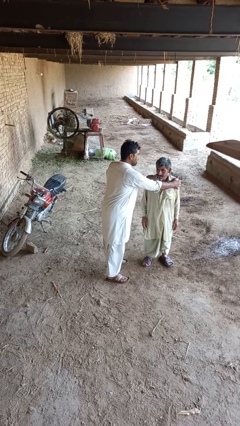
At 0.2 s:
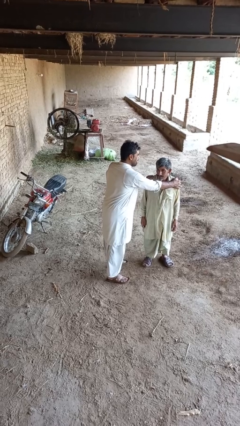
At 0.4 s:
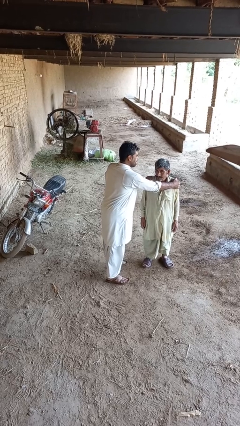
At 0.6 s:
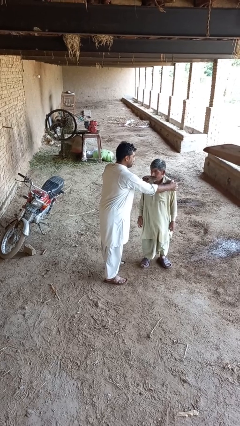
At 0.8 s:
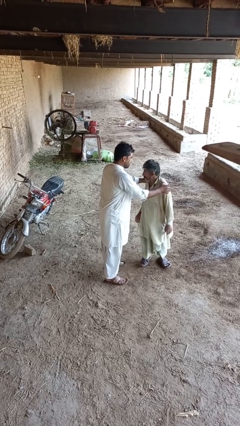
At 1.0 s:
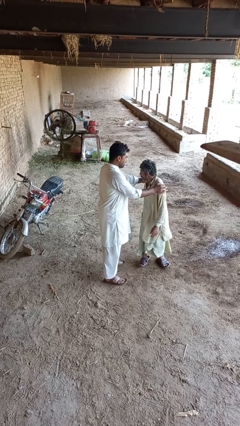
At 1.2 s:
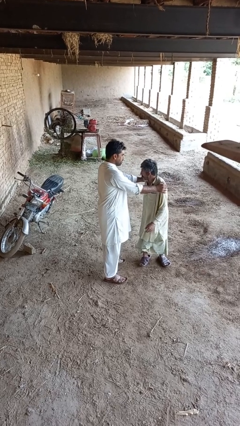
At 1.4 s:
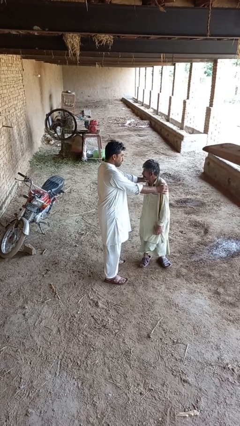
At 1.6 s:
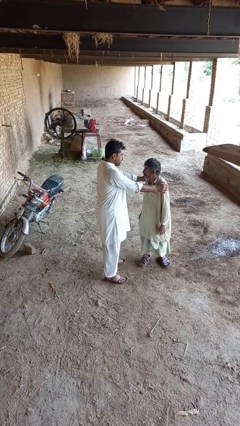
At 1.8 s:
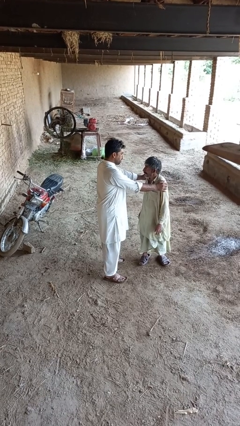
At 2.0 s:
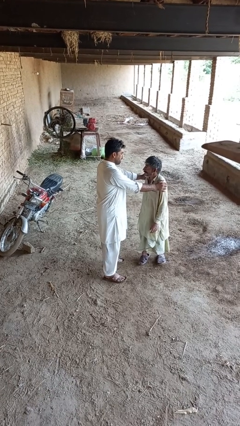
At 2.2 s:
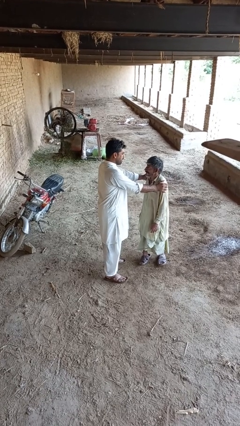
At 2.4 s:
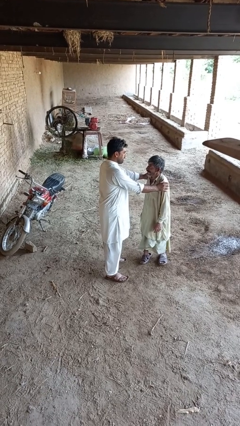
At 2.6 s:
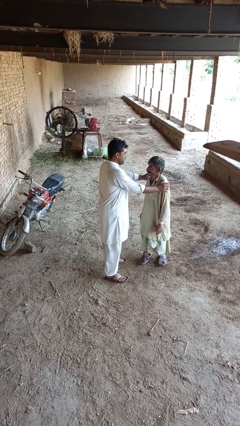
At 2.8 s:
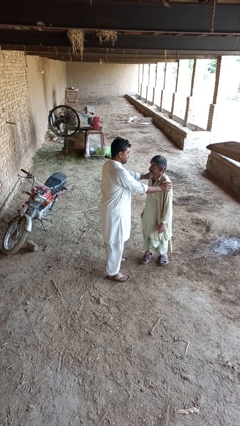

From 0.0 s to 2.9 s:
person spins person around

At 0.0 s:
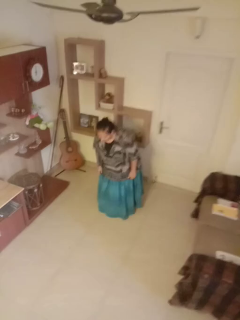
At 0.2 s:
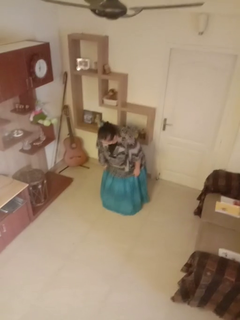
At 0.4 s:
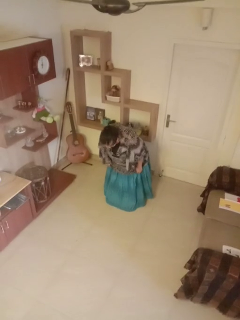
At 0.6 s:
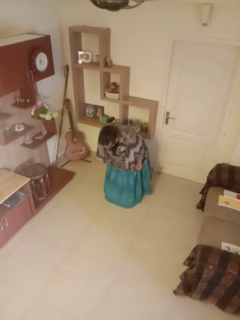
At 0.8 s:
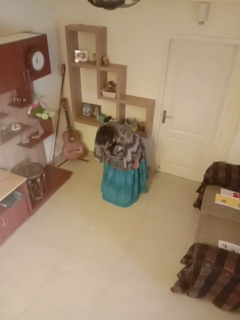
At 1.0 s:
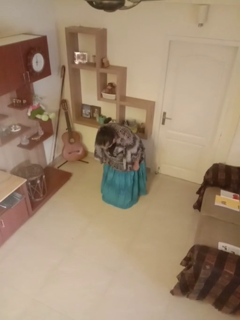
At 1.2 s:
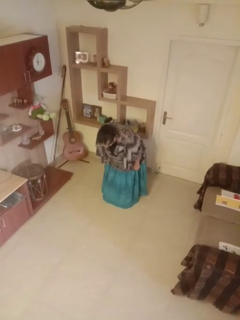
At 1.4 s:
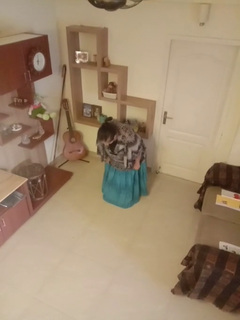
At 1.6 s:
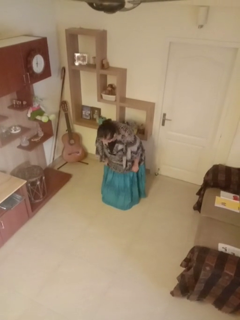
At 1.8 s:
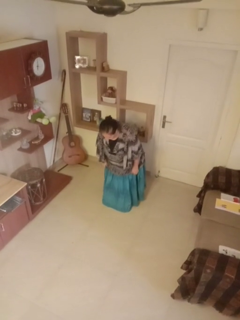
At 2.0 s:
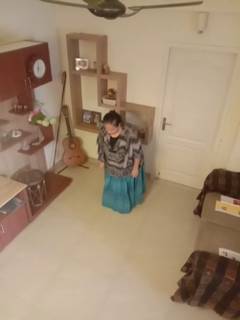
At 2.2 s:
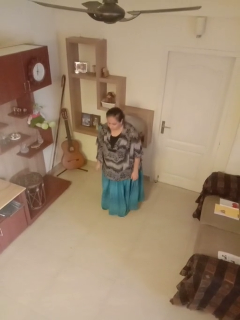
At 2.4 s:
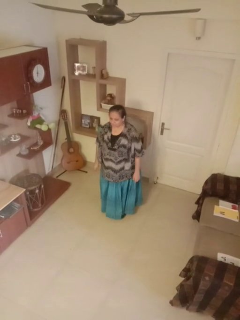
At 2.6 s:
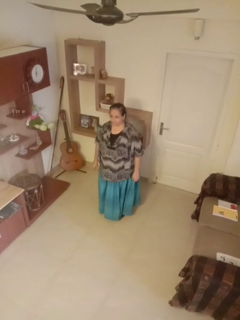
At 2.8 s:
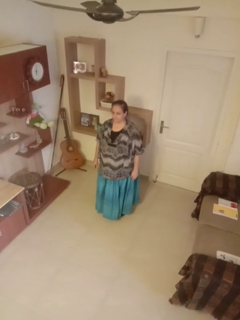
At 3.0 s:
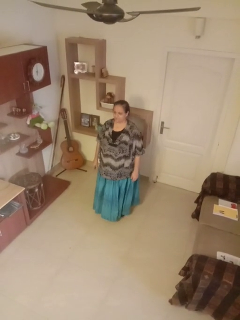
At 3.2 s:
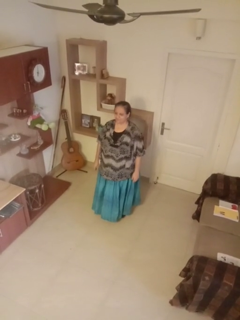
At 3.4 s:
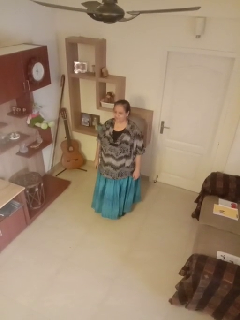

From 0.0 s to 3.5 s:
person bows

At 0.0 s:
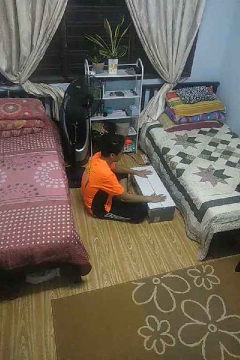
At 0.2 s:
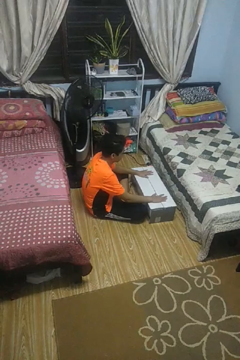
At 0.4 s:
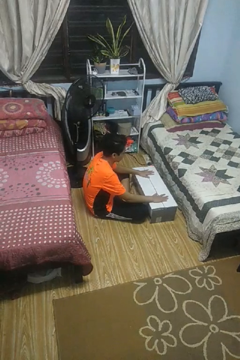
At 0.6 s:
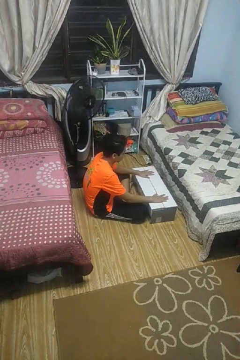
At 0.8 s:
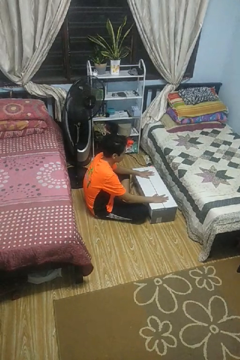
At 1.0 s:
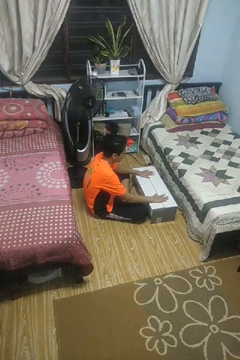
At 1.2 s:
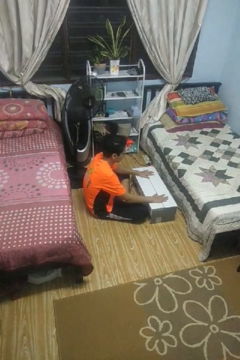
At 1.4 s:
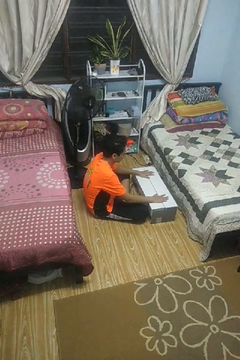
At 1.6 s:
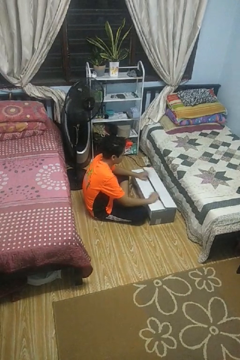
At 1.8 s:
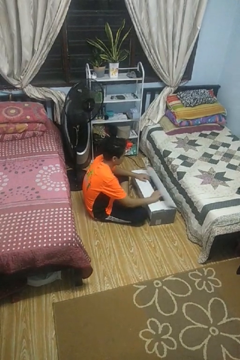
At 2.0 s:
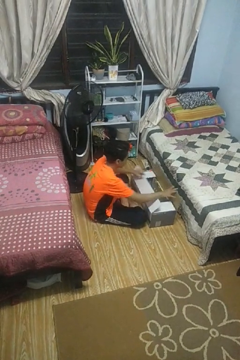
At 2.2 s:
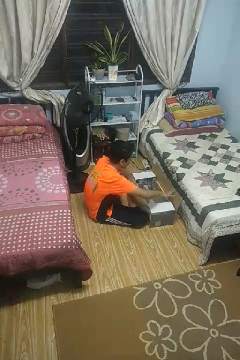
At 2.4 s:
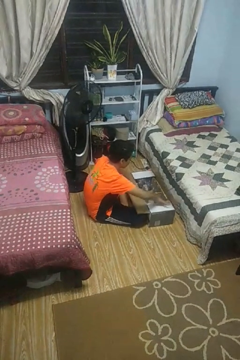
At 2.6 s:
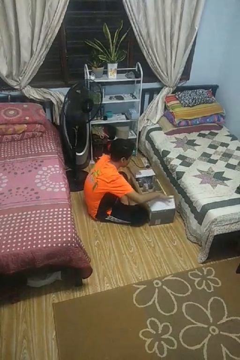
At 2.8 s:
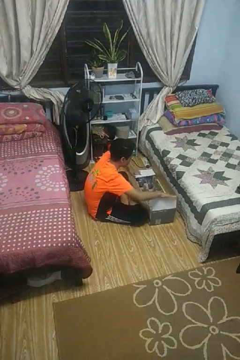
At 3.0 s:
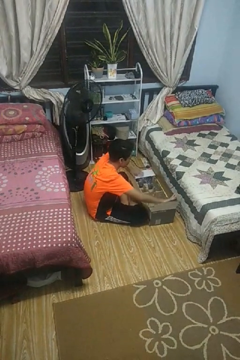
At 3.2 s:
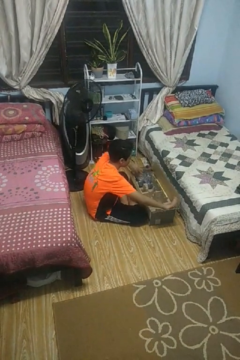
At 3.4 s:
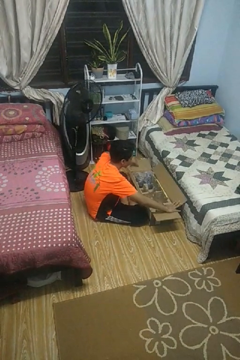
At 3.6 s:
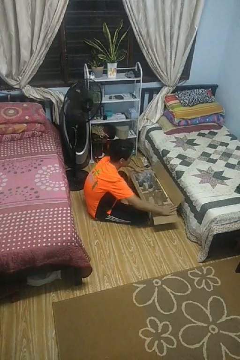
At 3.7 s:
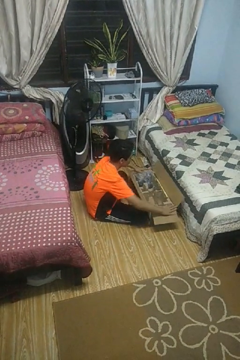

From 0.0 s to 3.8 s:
person opens box

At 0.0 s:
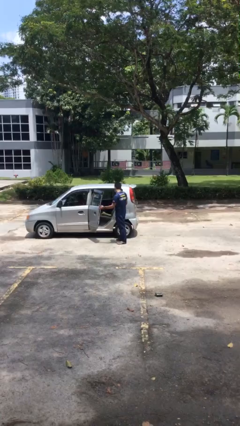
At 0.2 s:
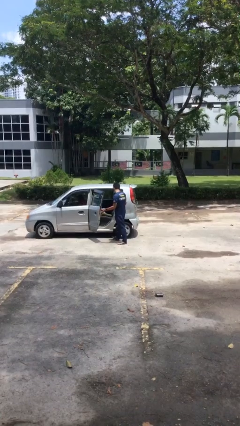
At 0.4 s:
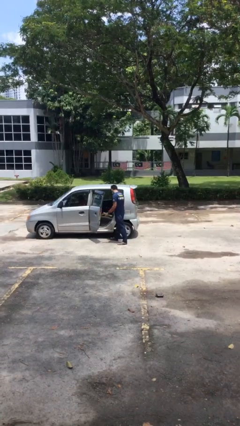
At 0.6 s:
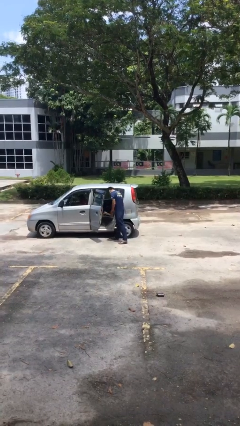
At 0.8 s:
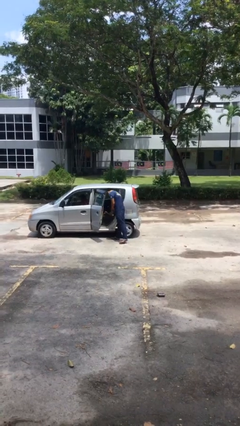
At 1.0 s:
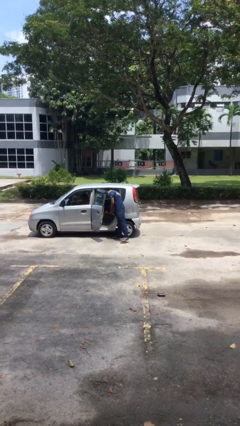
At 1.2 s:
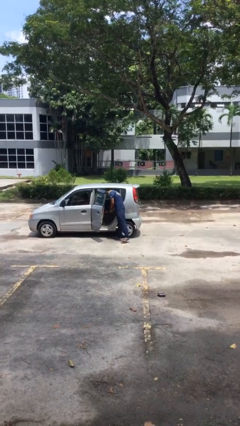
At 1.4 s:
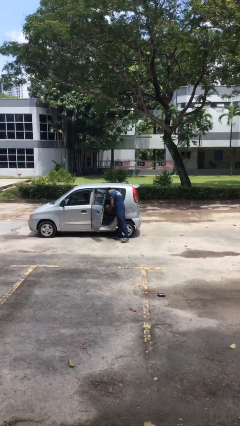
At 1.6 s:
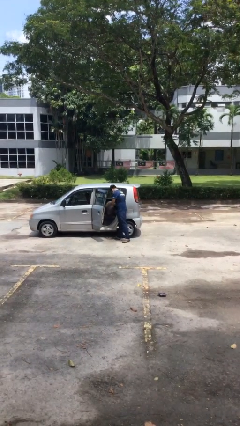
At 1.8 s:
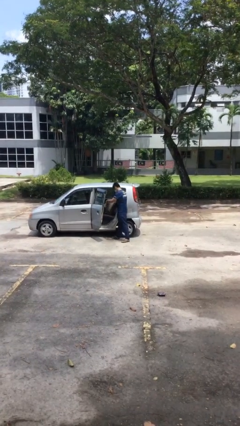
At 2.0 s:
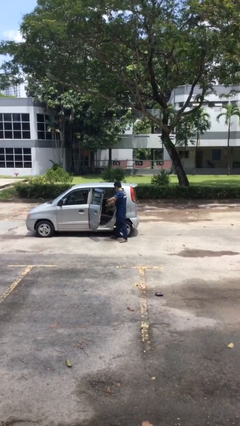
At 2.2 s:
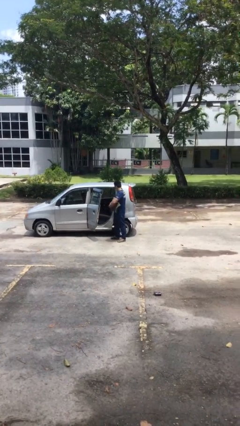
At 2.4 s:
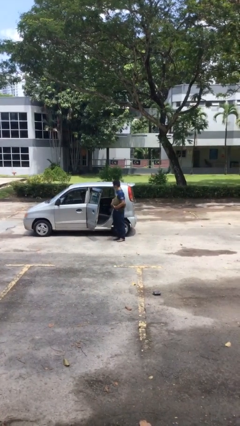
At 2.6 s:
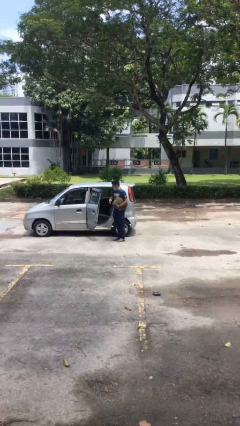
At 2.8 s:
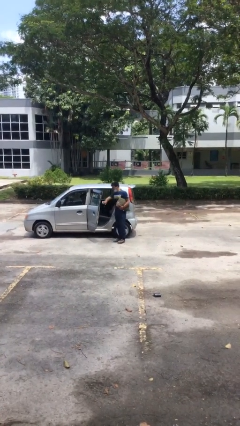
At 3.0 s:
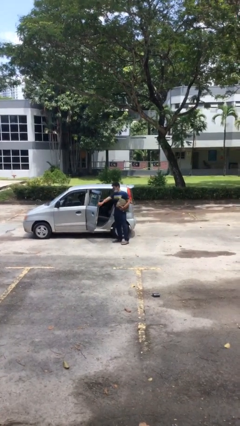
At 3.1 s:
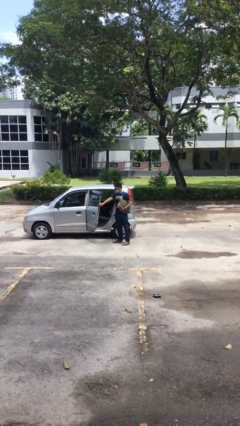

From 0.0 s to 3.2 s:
person unloads car

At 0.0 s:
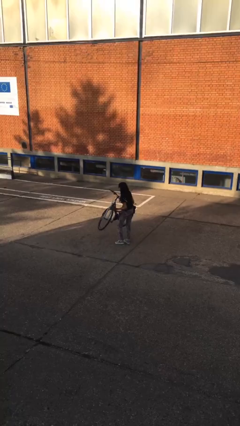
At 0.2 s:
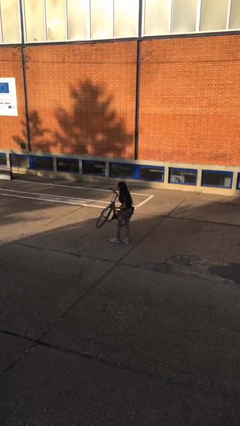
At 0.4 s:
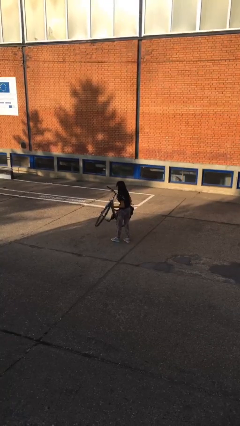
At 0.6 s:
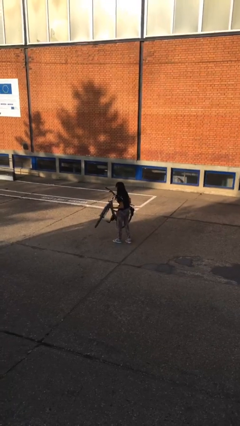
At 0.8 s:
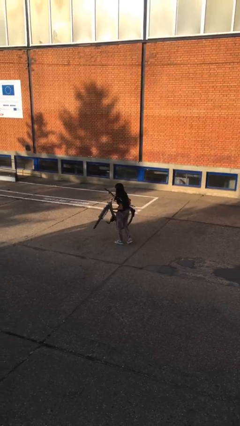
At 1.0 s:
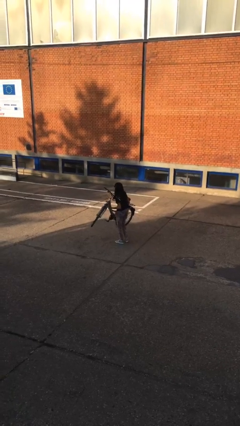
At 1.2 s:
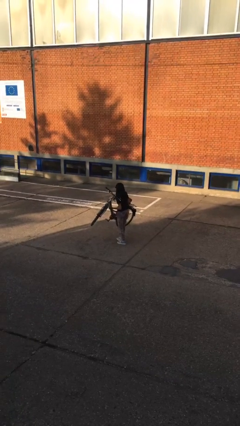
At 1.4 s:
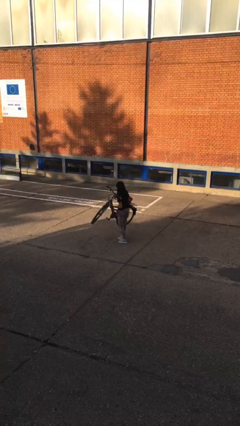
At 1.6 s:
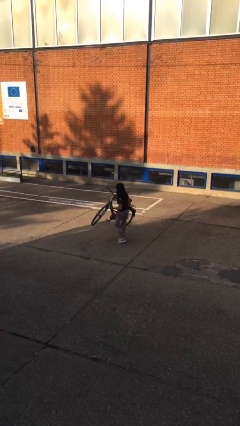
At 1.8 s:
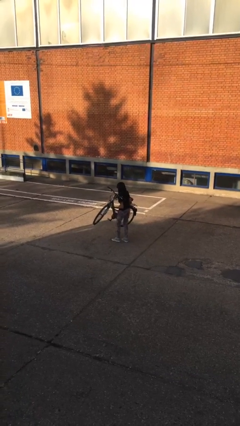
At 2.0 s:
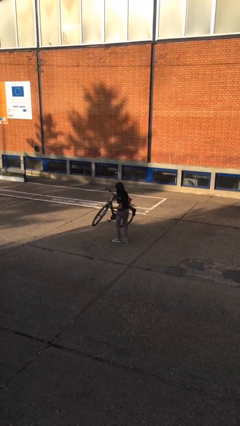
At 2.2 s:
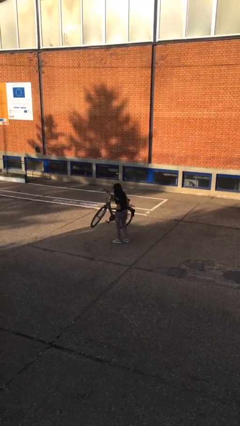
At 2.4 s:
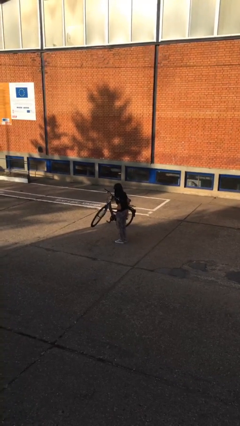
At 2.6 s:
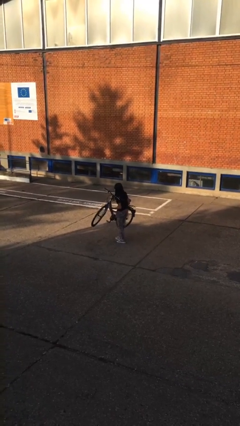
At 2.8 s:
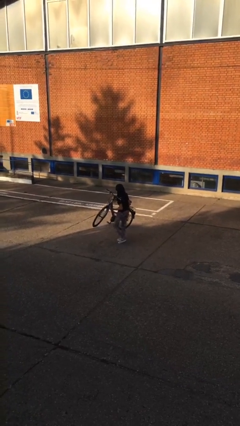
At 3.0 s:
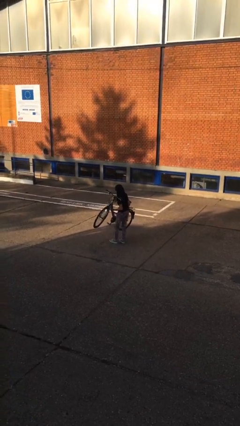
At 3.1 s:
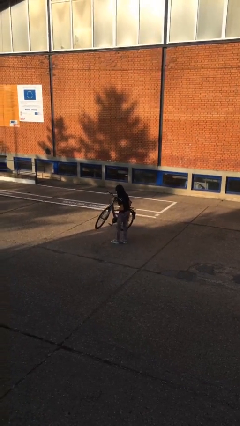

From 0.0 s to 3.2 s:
person carries heavy object

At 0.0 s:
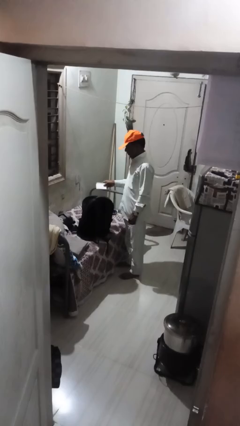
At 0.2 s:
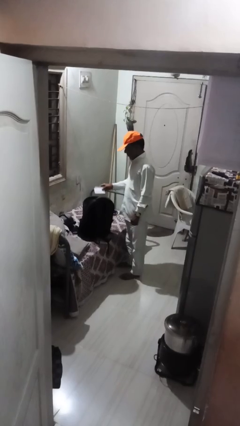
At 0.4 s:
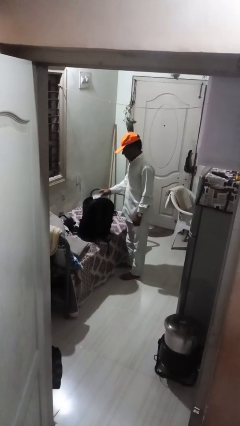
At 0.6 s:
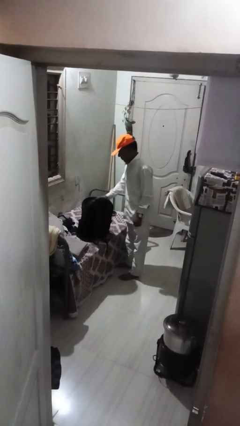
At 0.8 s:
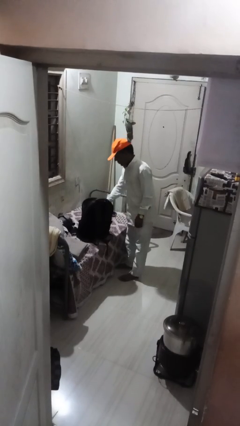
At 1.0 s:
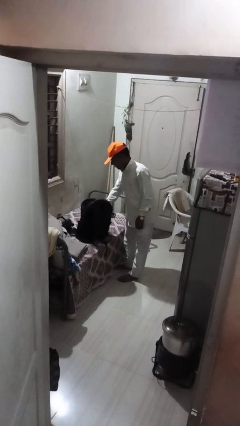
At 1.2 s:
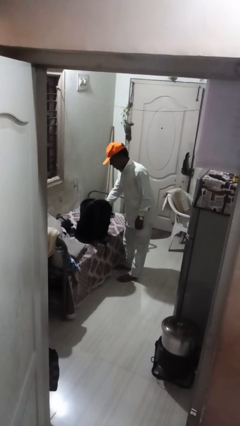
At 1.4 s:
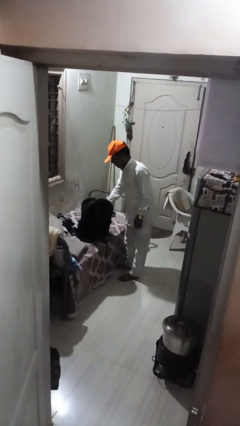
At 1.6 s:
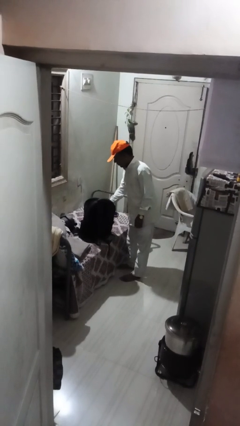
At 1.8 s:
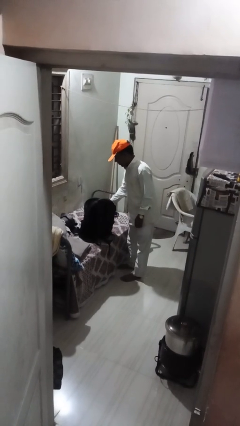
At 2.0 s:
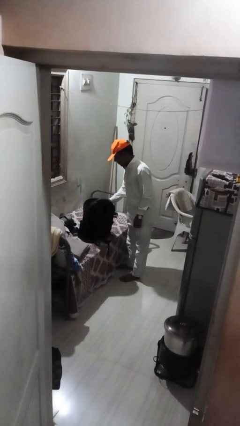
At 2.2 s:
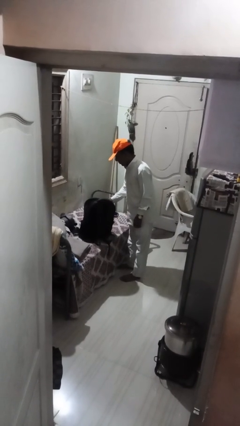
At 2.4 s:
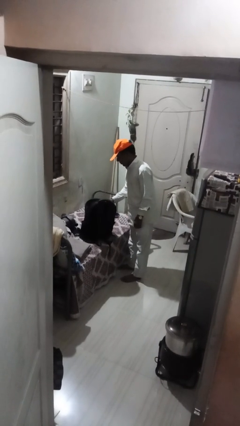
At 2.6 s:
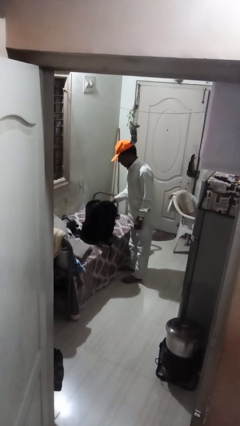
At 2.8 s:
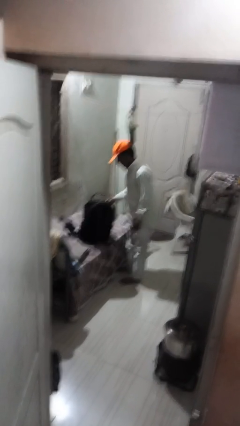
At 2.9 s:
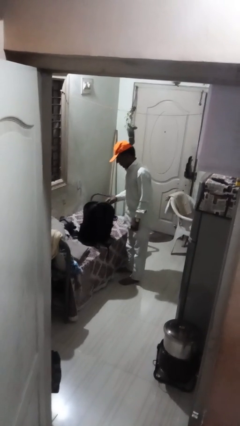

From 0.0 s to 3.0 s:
person puts object into backpack

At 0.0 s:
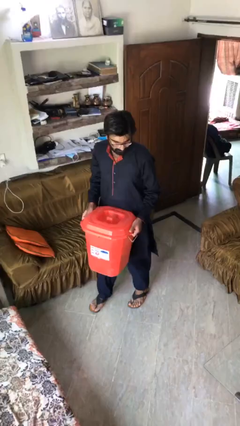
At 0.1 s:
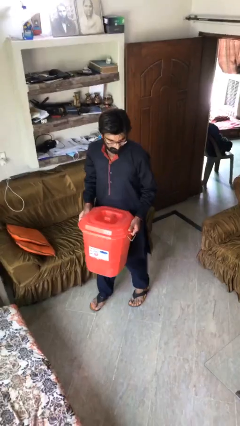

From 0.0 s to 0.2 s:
person puts down object on floor
